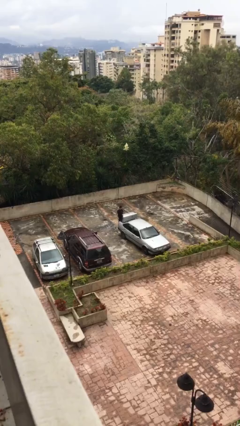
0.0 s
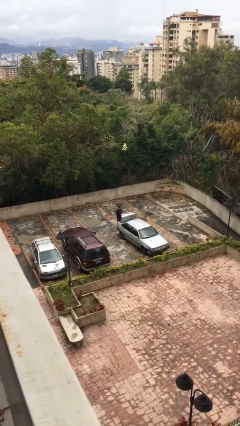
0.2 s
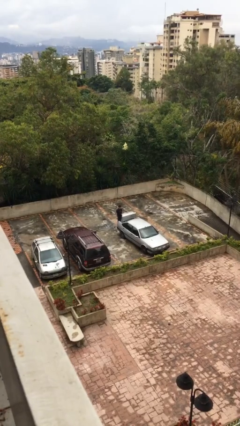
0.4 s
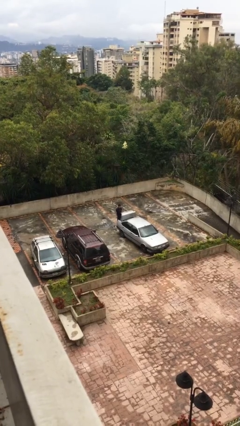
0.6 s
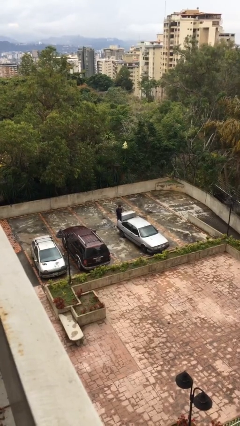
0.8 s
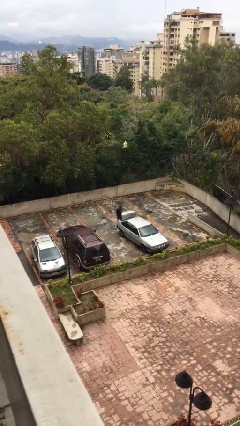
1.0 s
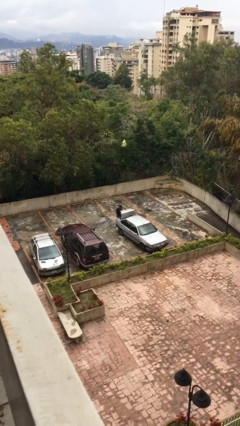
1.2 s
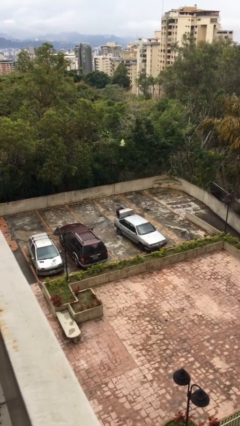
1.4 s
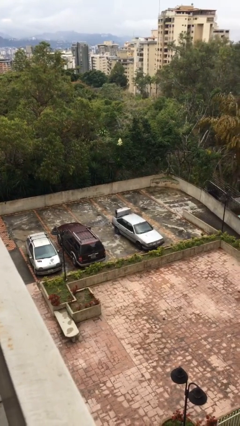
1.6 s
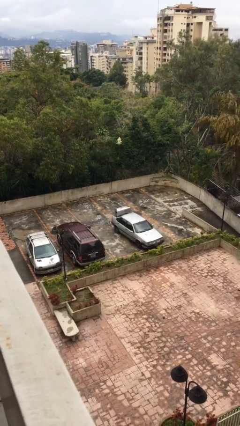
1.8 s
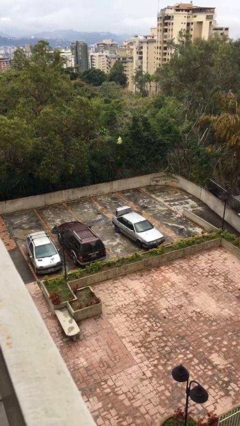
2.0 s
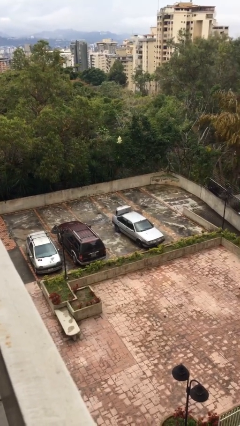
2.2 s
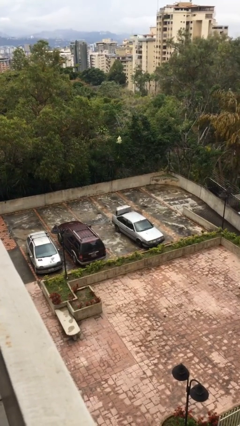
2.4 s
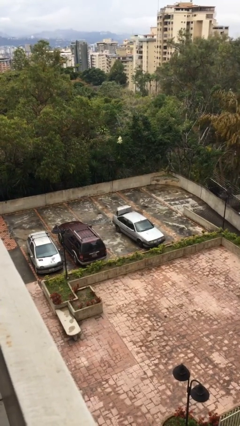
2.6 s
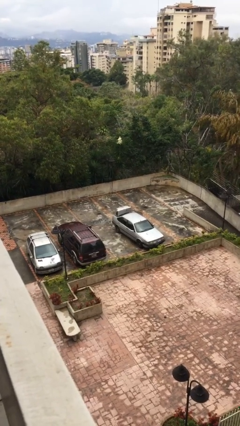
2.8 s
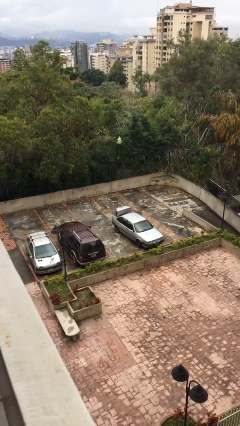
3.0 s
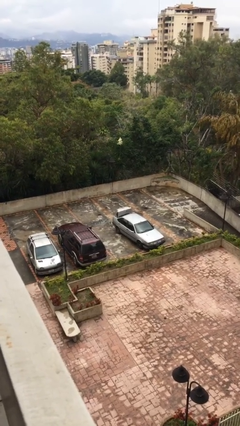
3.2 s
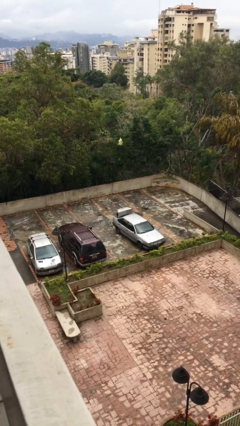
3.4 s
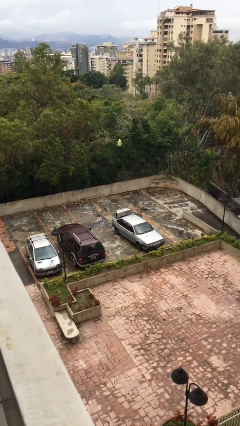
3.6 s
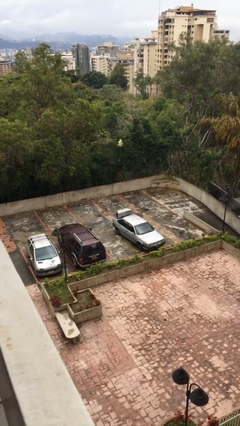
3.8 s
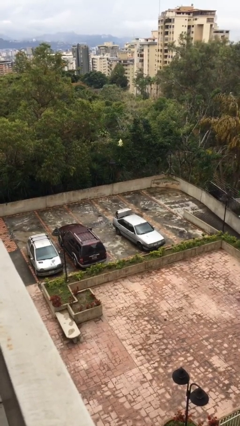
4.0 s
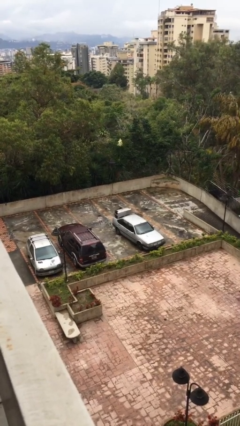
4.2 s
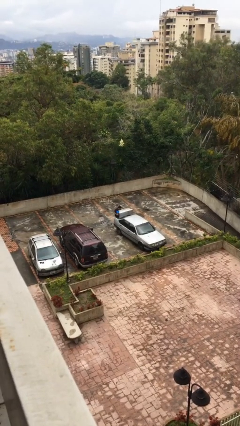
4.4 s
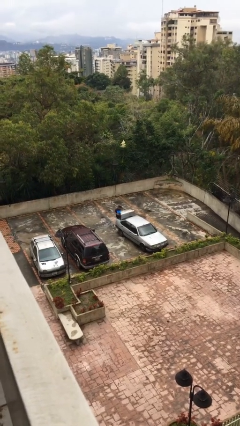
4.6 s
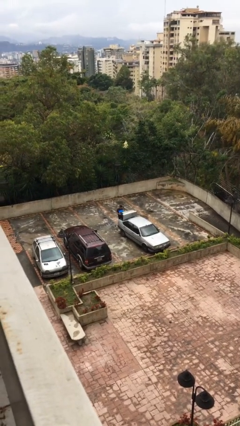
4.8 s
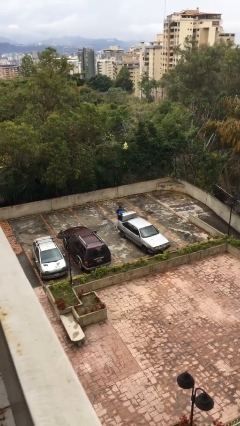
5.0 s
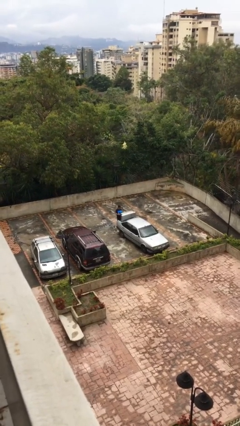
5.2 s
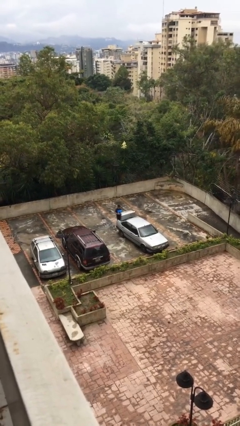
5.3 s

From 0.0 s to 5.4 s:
person unloads car

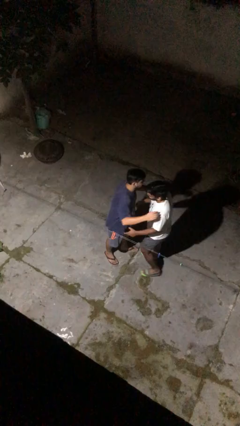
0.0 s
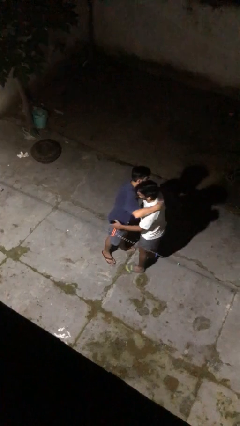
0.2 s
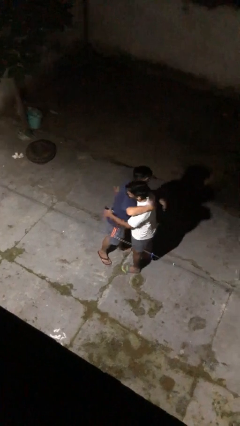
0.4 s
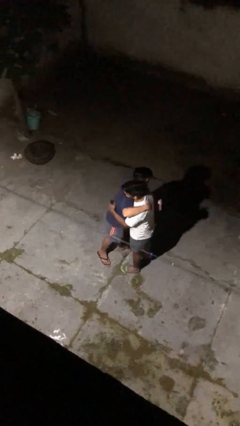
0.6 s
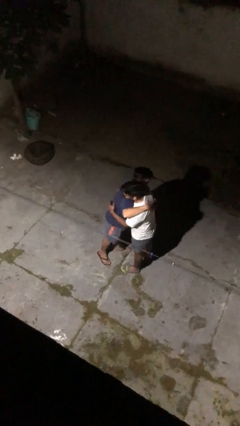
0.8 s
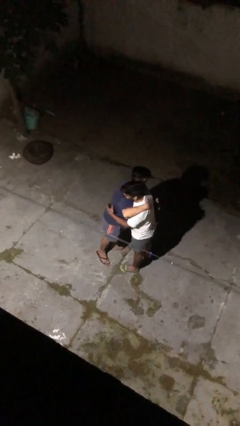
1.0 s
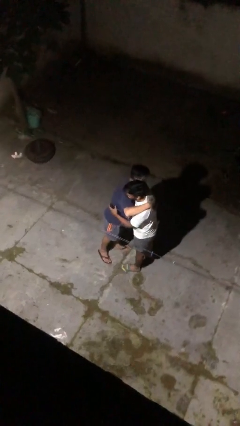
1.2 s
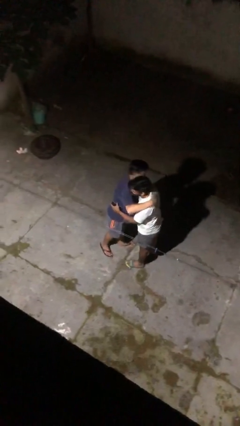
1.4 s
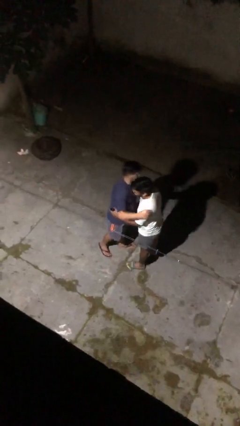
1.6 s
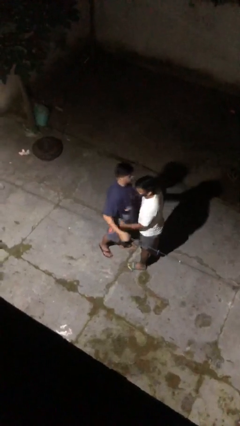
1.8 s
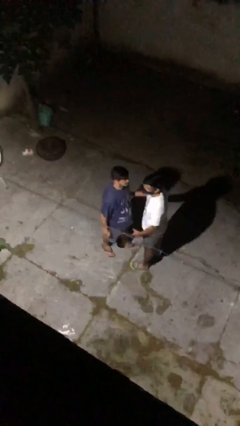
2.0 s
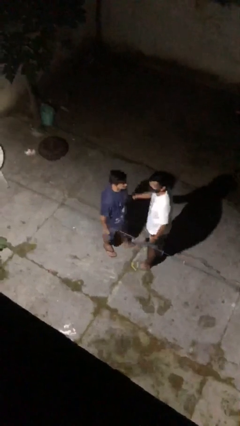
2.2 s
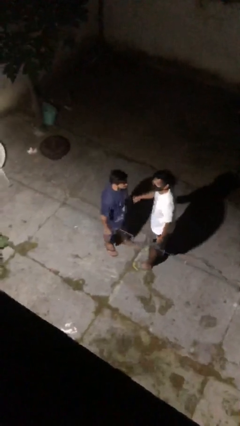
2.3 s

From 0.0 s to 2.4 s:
person embraces person

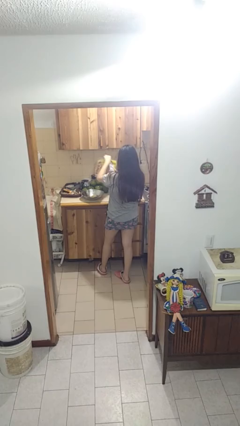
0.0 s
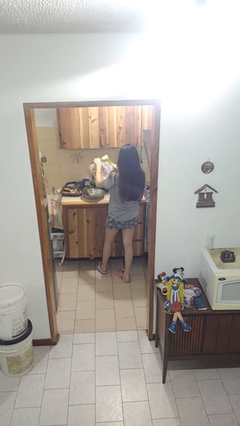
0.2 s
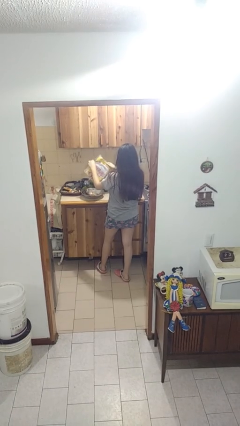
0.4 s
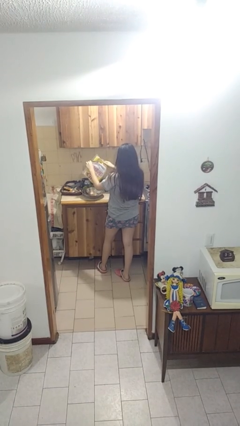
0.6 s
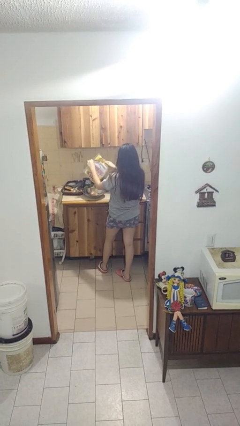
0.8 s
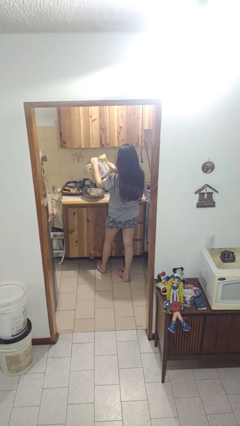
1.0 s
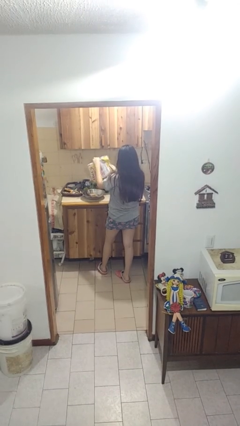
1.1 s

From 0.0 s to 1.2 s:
person pours into bowl

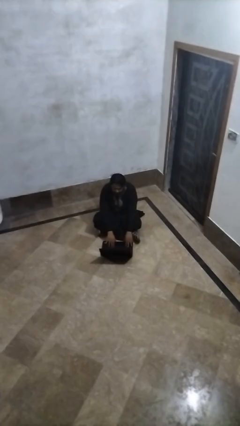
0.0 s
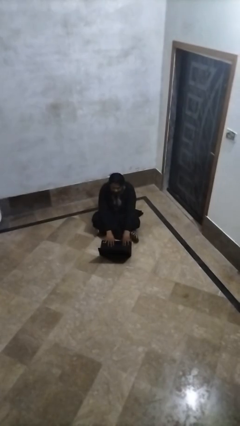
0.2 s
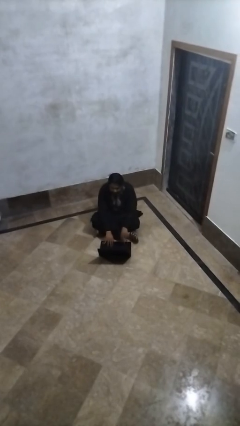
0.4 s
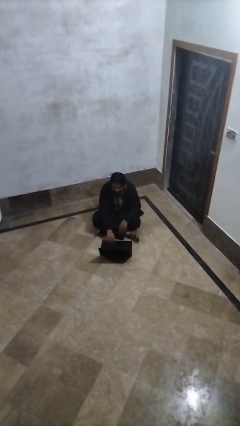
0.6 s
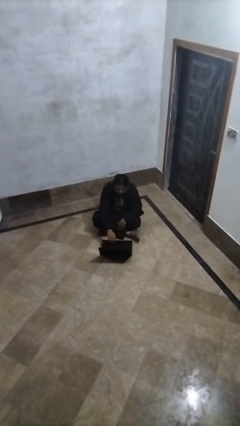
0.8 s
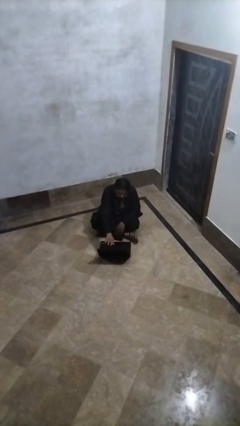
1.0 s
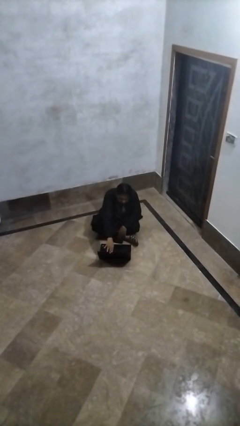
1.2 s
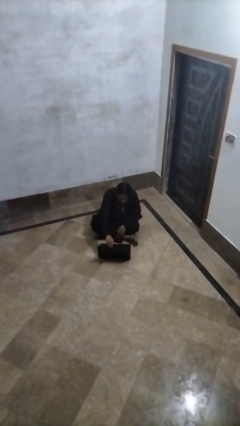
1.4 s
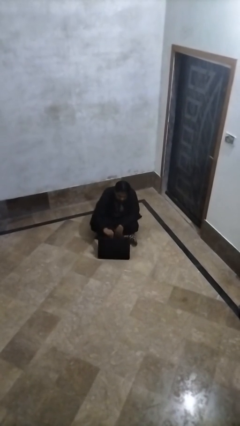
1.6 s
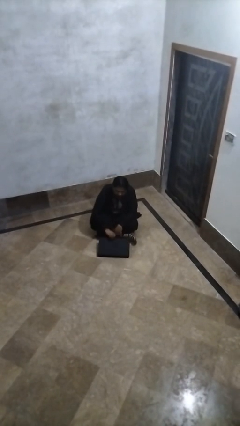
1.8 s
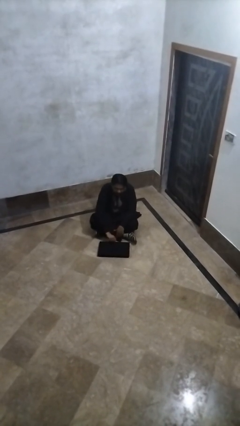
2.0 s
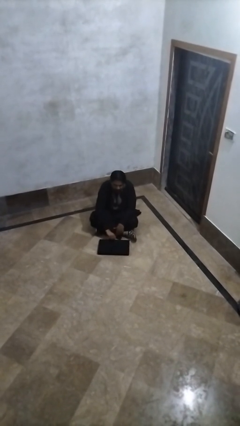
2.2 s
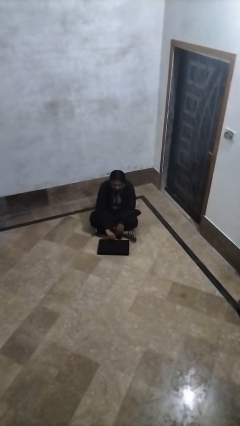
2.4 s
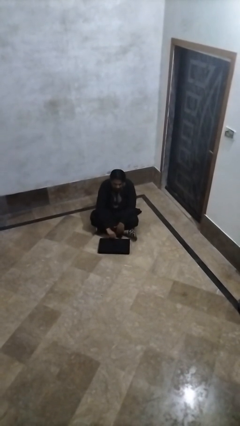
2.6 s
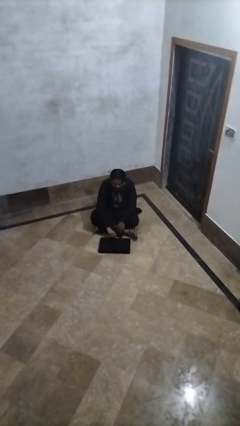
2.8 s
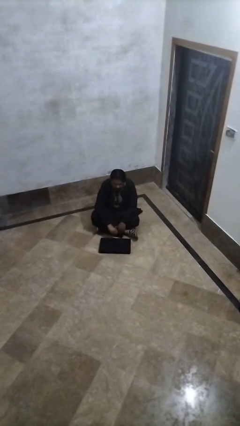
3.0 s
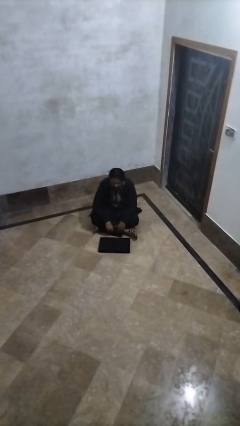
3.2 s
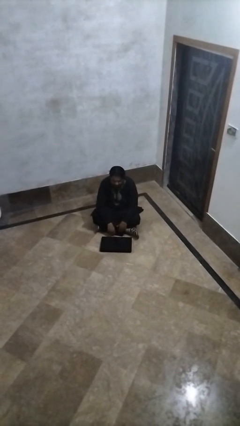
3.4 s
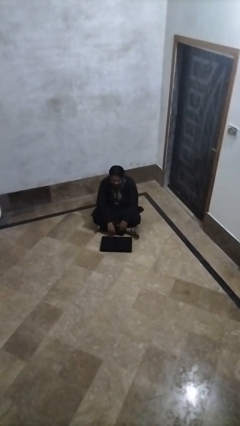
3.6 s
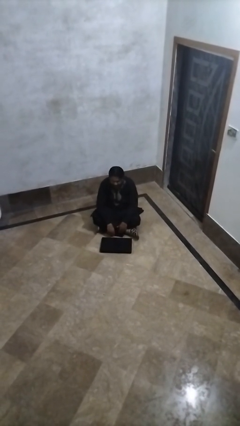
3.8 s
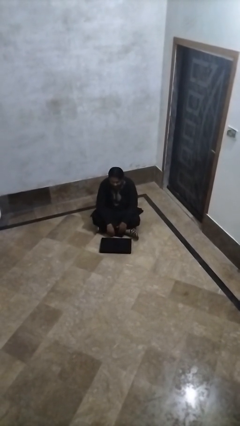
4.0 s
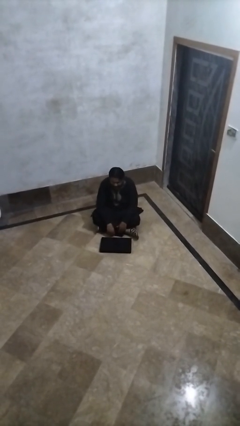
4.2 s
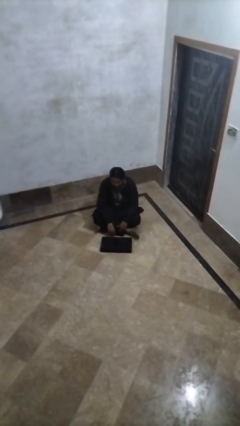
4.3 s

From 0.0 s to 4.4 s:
person closes laptop

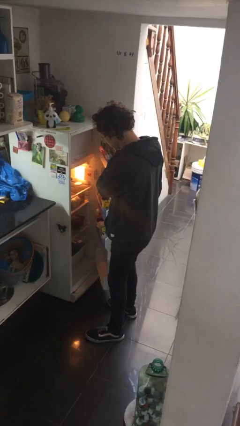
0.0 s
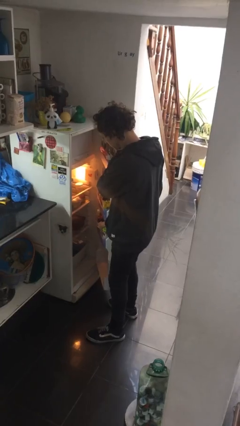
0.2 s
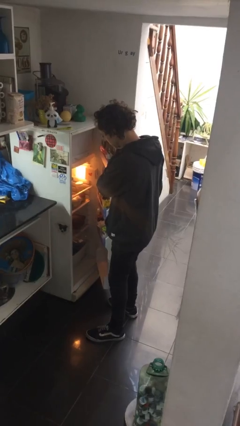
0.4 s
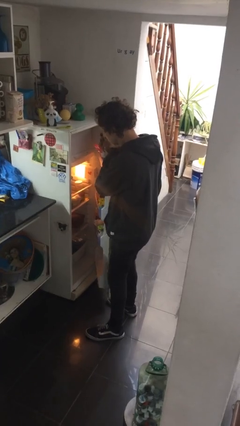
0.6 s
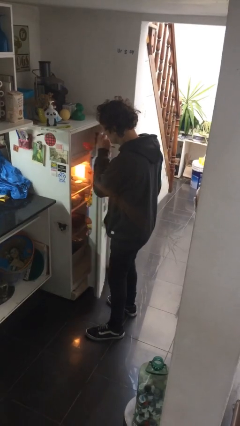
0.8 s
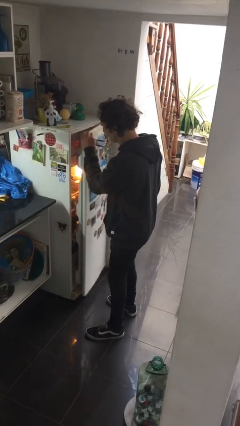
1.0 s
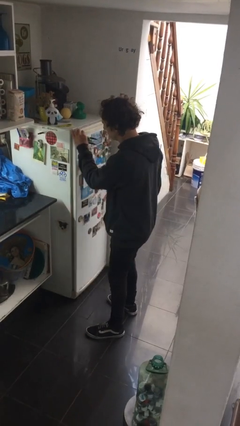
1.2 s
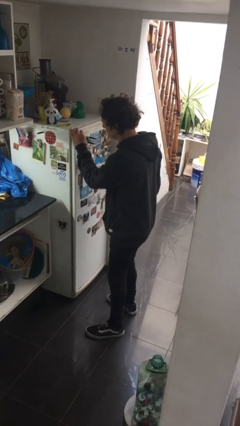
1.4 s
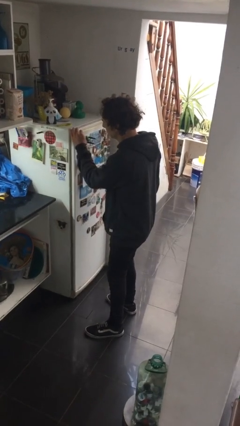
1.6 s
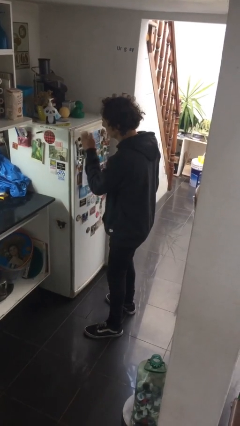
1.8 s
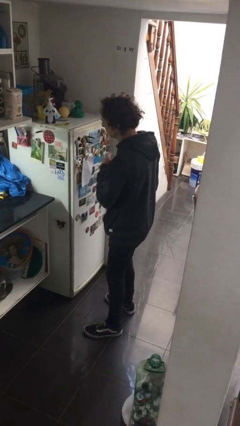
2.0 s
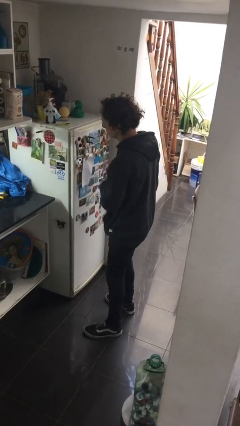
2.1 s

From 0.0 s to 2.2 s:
person closes refrigerator

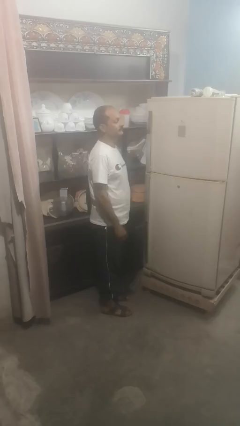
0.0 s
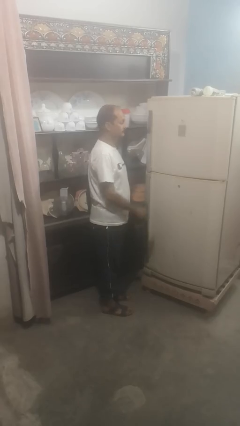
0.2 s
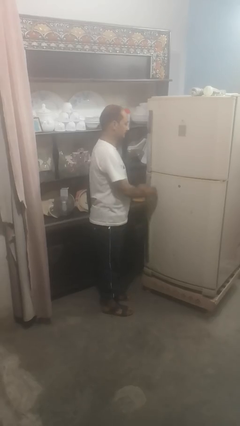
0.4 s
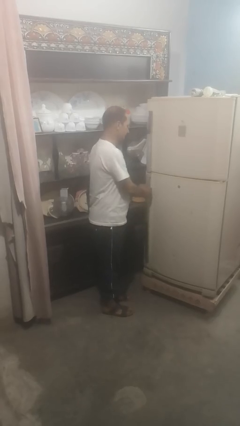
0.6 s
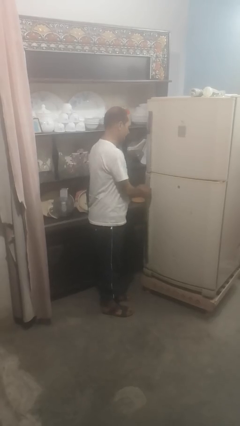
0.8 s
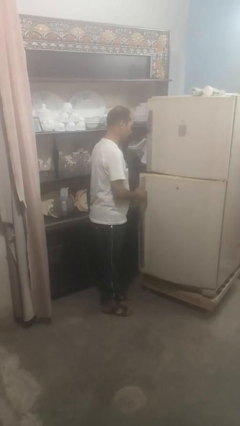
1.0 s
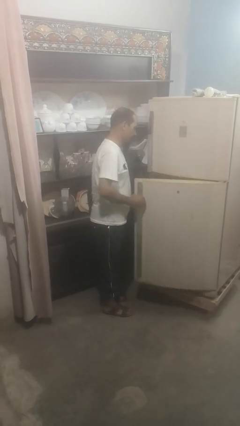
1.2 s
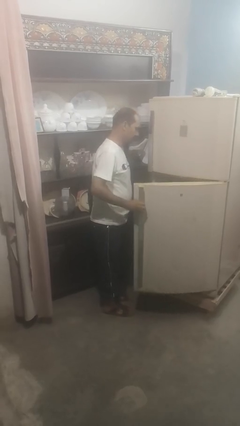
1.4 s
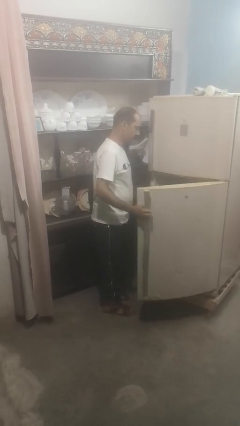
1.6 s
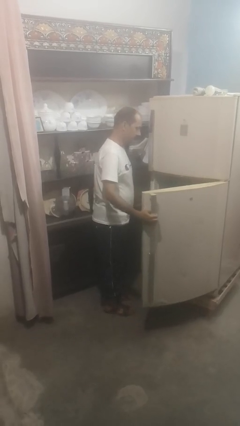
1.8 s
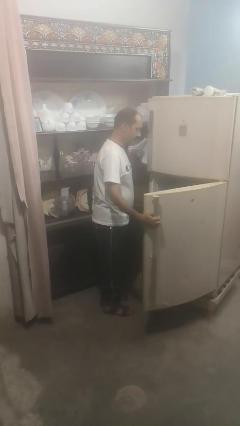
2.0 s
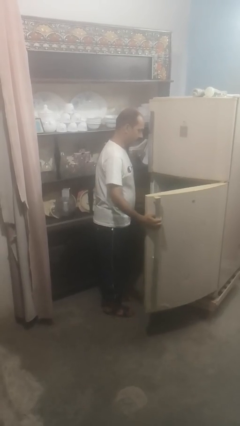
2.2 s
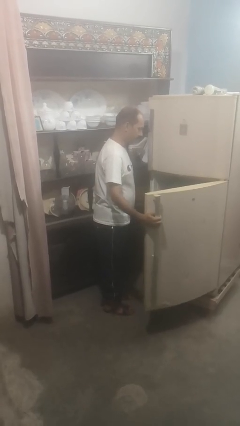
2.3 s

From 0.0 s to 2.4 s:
person opens refrigerator
